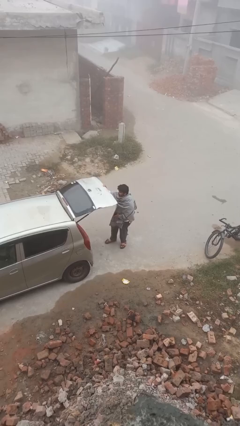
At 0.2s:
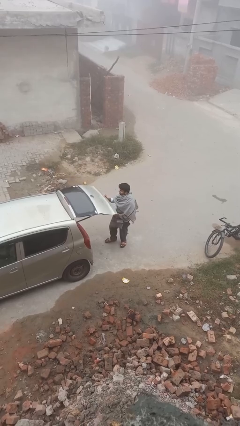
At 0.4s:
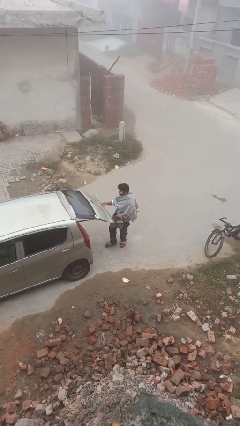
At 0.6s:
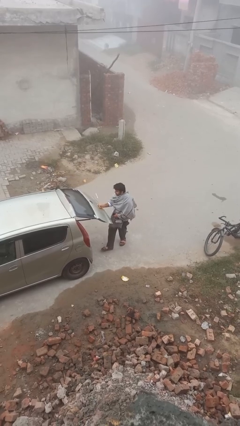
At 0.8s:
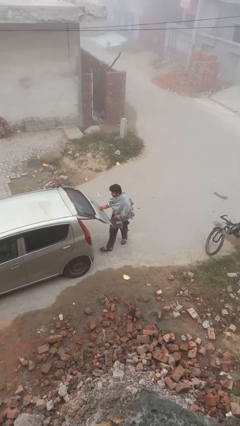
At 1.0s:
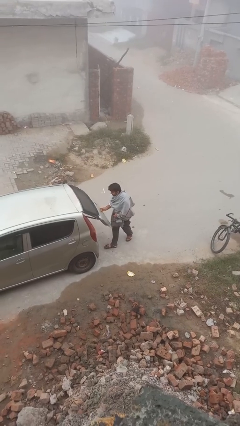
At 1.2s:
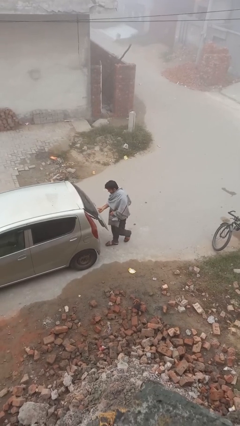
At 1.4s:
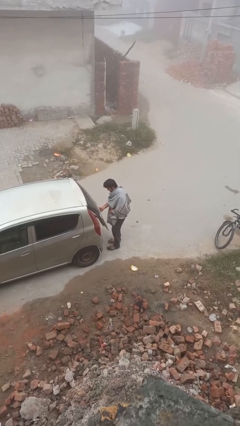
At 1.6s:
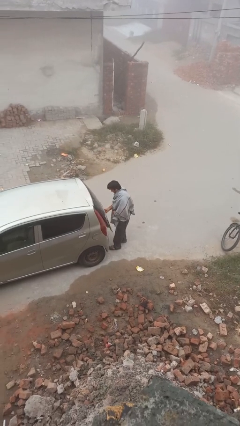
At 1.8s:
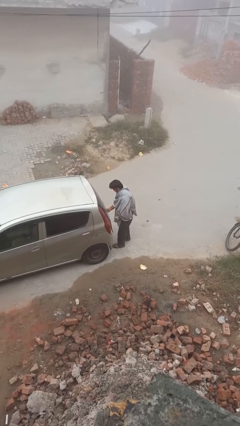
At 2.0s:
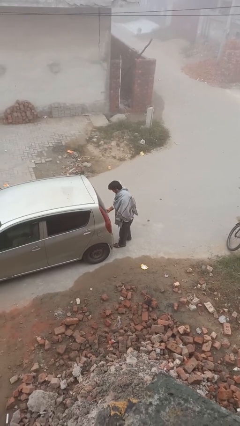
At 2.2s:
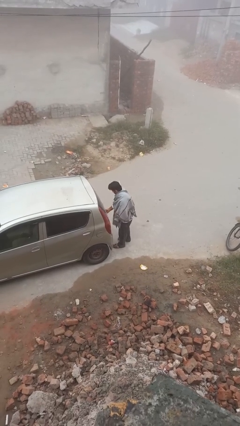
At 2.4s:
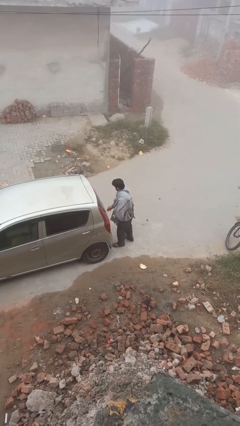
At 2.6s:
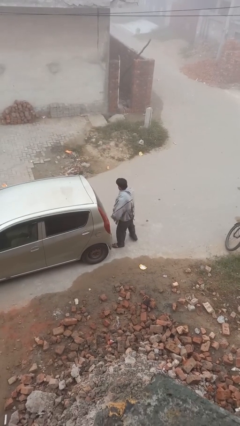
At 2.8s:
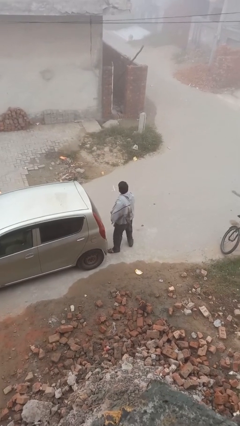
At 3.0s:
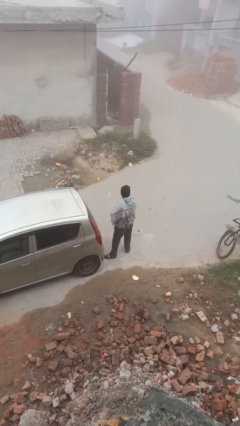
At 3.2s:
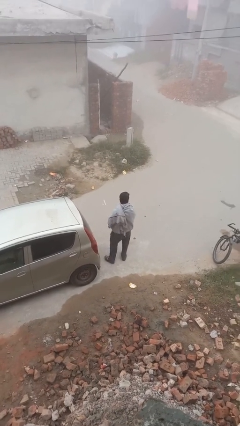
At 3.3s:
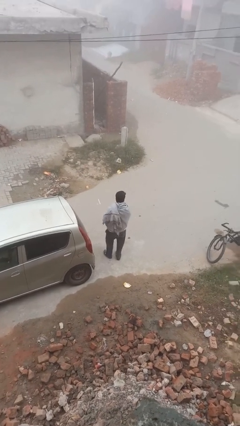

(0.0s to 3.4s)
person closes car trunk

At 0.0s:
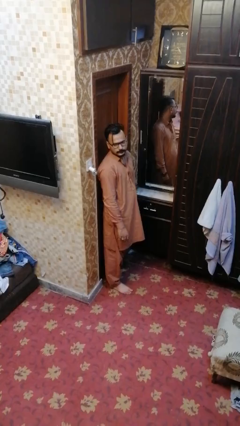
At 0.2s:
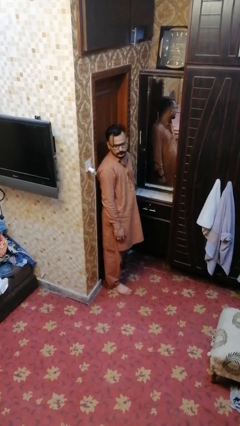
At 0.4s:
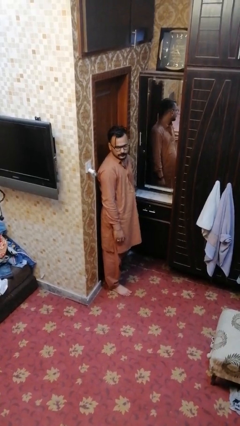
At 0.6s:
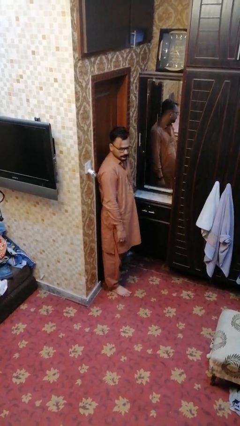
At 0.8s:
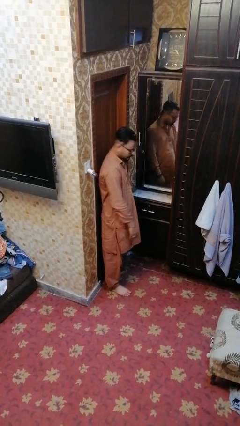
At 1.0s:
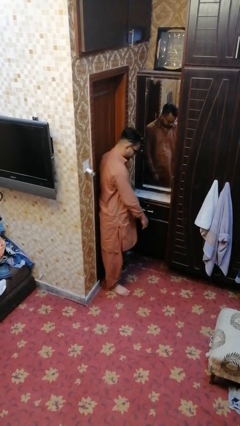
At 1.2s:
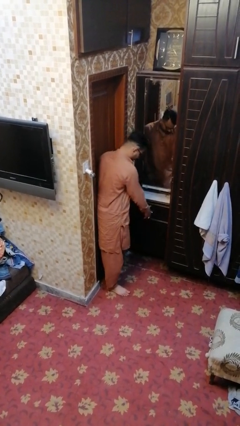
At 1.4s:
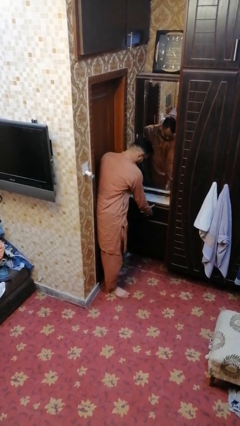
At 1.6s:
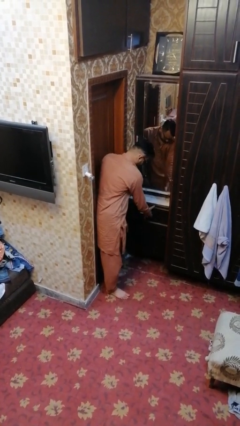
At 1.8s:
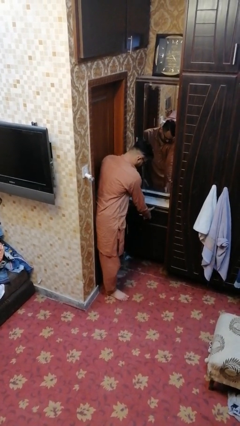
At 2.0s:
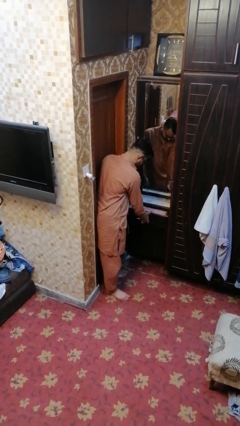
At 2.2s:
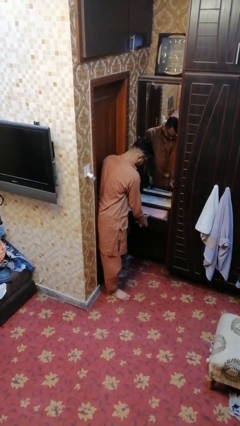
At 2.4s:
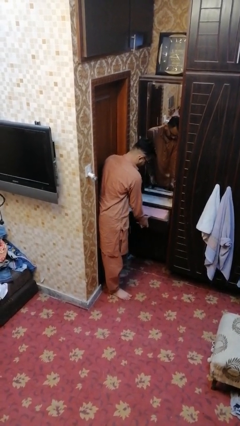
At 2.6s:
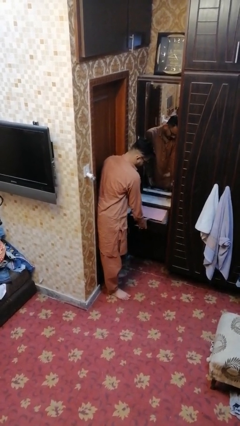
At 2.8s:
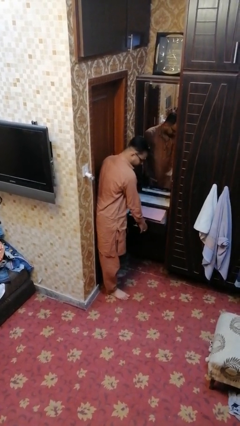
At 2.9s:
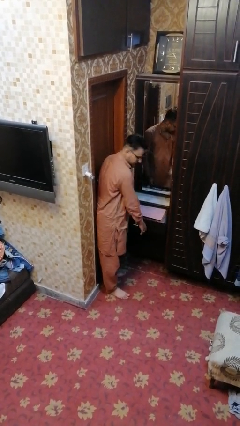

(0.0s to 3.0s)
person opens dresser drawer

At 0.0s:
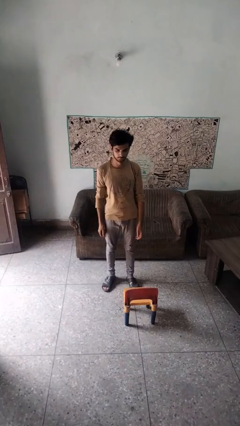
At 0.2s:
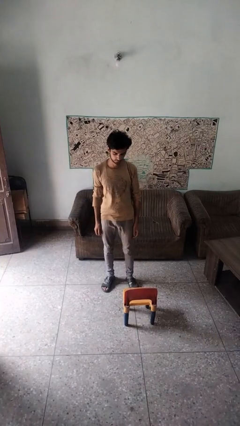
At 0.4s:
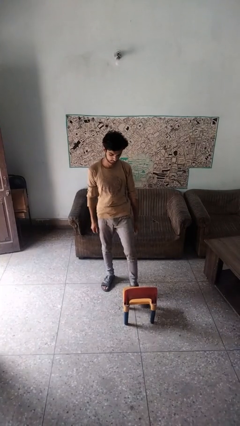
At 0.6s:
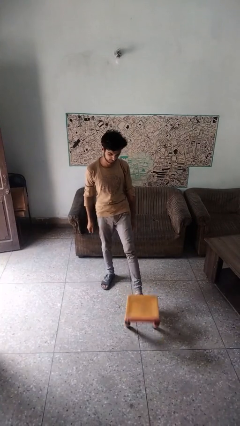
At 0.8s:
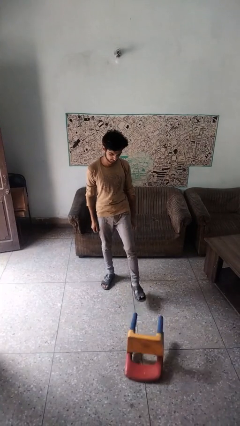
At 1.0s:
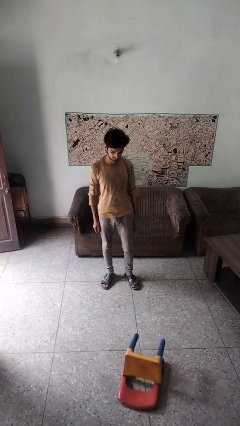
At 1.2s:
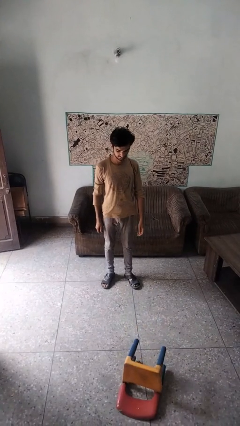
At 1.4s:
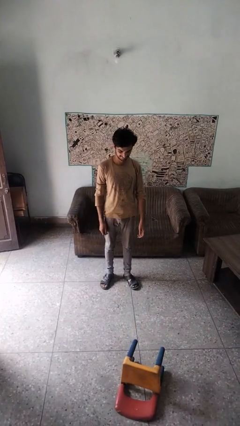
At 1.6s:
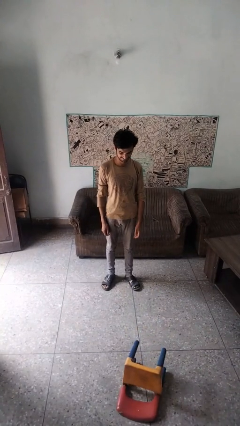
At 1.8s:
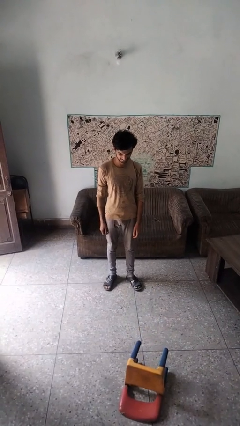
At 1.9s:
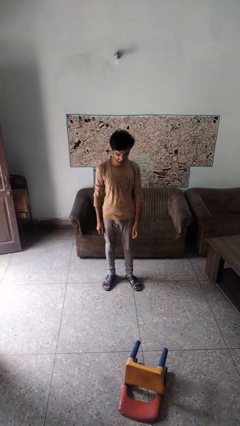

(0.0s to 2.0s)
person knocks over furniture

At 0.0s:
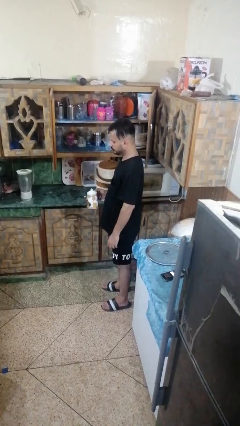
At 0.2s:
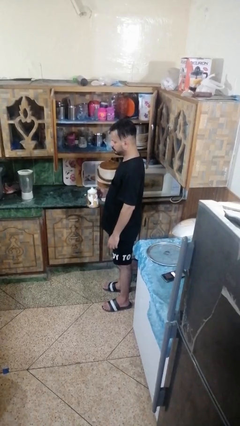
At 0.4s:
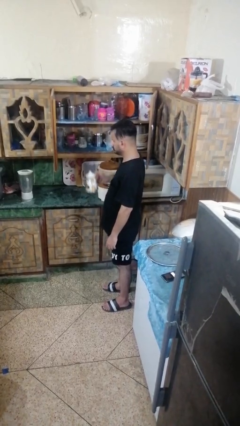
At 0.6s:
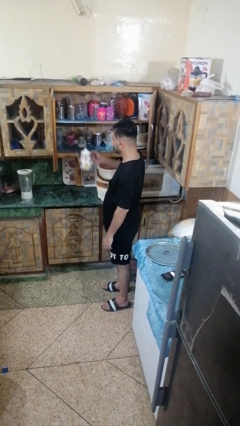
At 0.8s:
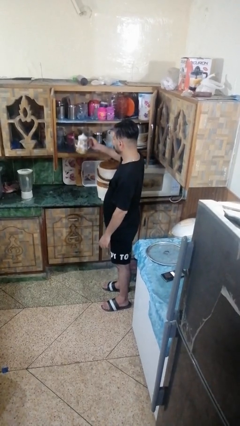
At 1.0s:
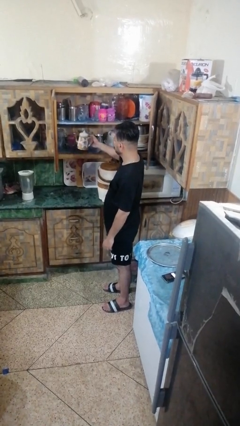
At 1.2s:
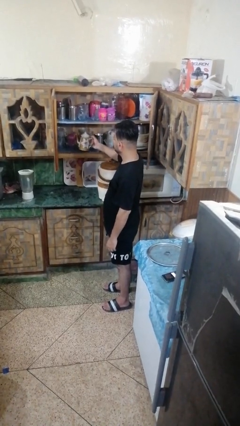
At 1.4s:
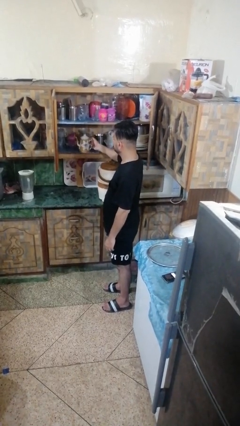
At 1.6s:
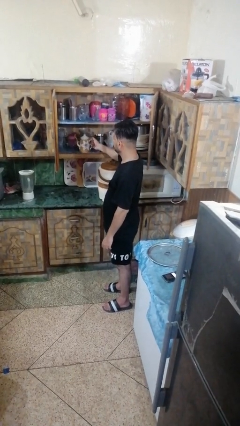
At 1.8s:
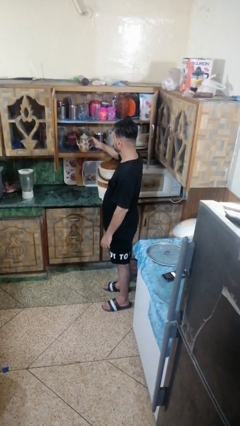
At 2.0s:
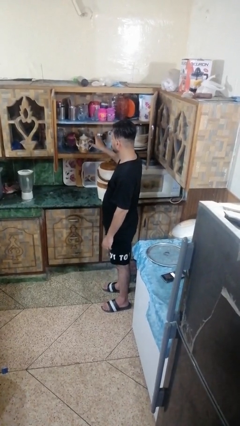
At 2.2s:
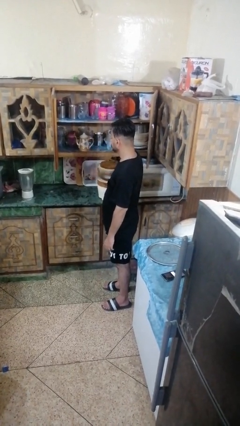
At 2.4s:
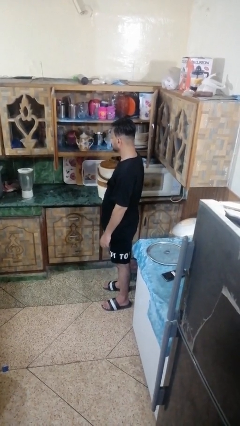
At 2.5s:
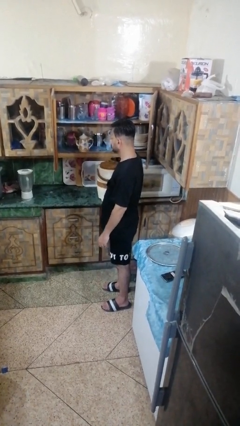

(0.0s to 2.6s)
person puts down object into cabinet

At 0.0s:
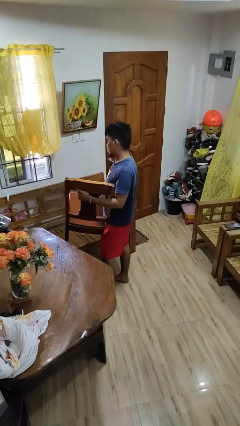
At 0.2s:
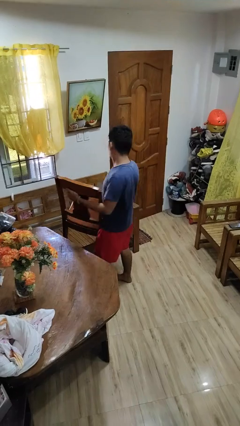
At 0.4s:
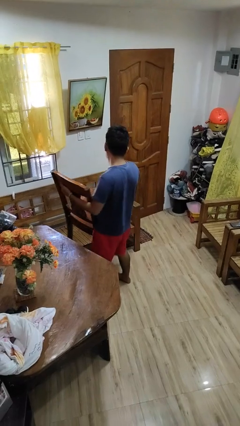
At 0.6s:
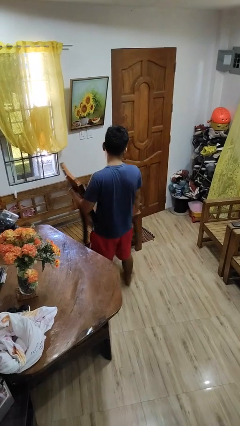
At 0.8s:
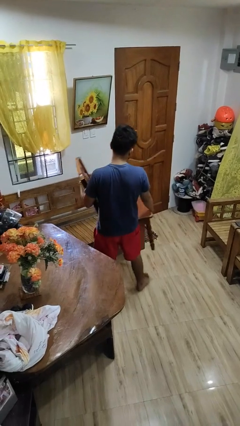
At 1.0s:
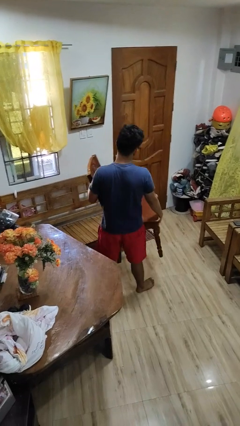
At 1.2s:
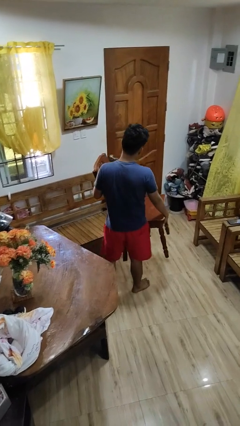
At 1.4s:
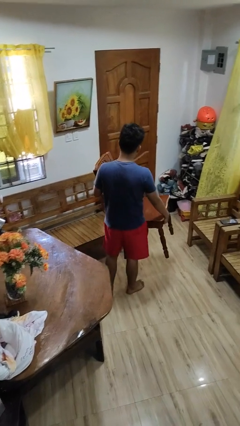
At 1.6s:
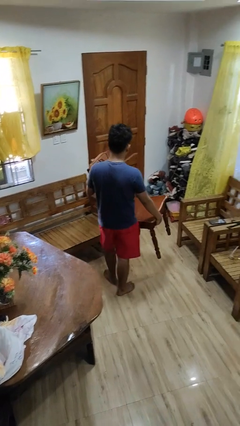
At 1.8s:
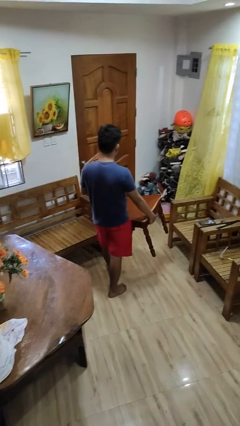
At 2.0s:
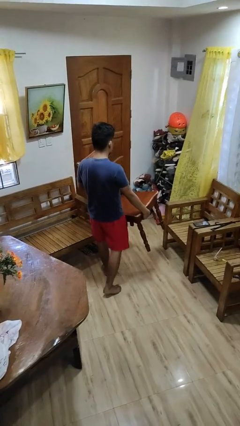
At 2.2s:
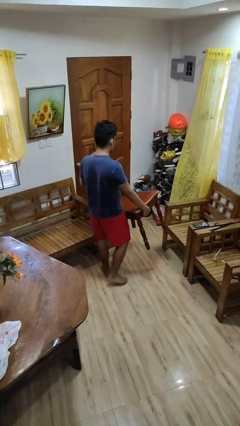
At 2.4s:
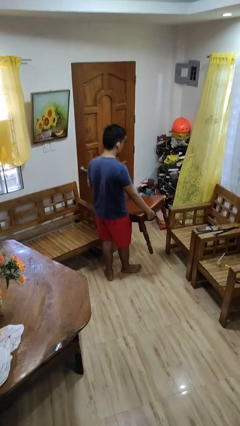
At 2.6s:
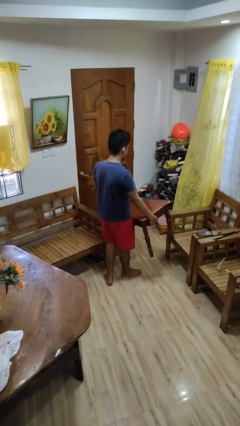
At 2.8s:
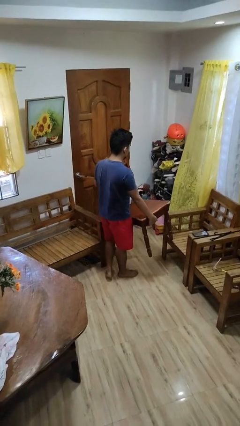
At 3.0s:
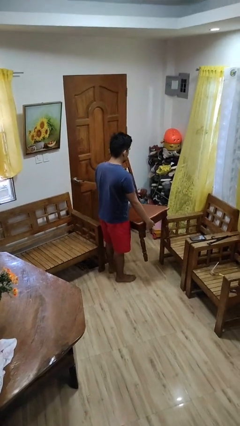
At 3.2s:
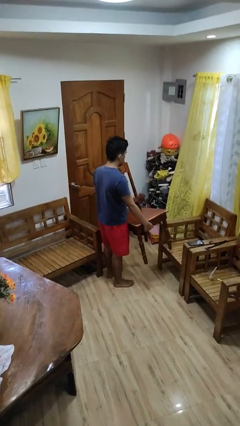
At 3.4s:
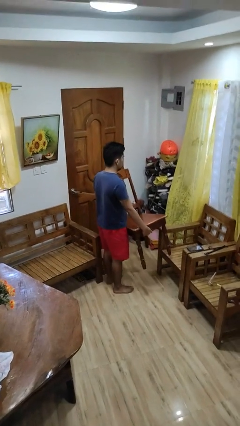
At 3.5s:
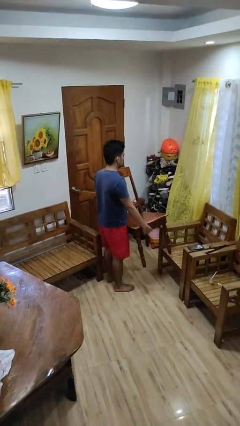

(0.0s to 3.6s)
person carries furniture

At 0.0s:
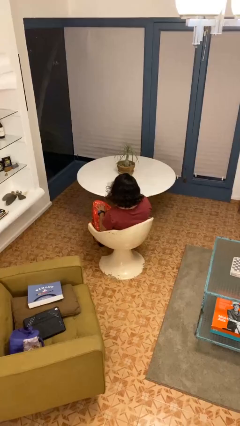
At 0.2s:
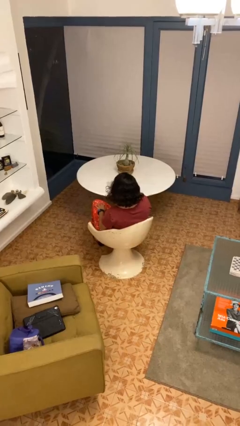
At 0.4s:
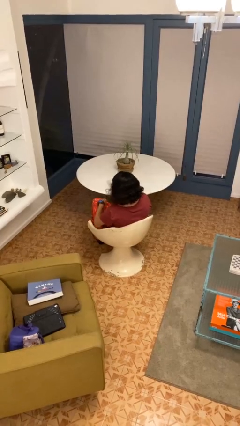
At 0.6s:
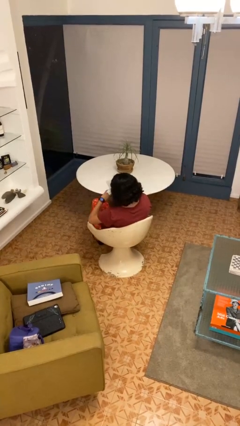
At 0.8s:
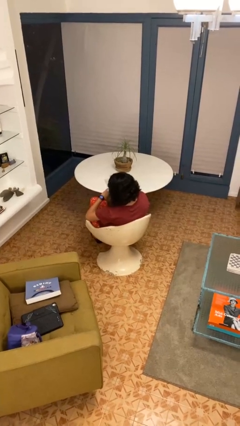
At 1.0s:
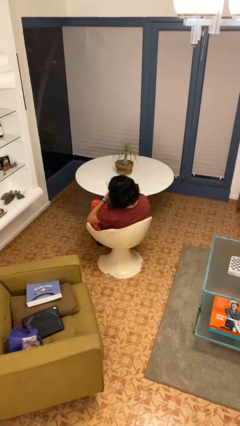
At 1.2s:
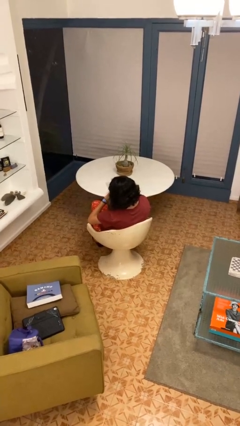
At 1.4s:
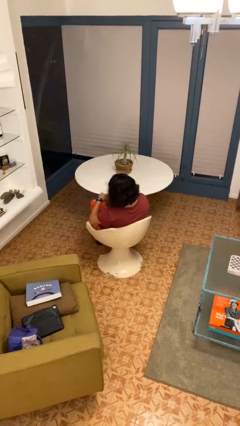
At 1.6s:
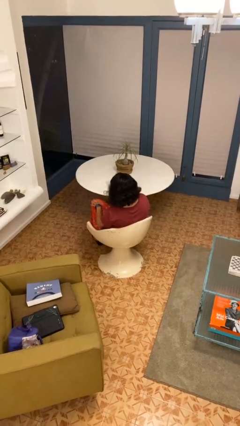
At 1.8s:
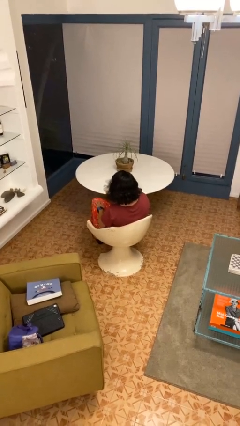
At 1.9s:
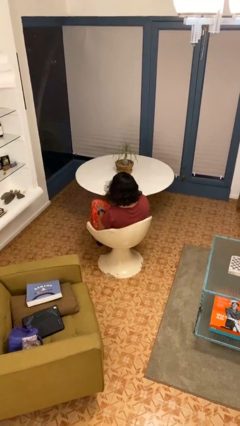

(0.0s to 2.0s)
person looks at wristwatch

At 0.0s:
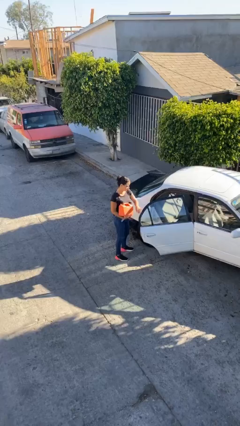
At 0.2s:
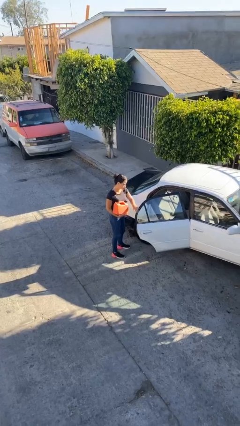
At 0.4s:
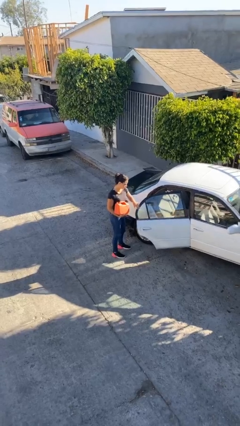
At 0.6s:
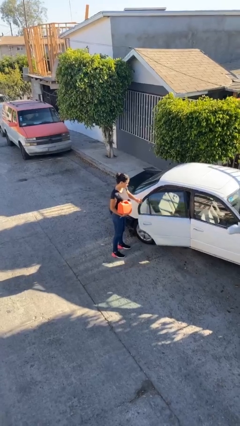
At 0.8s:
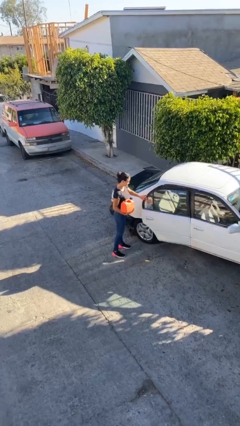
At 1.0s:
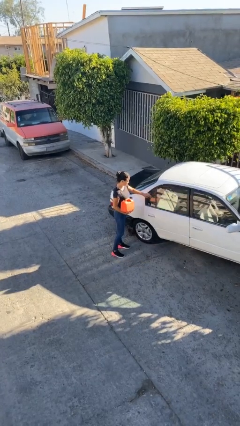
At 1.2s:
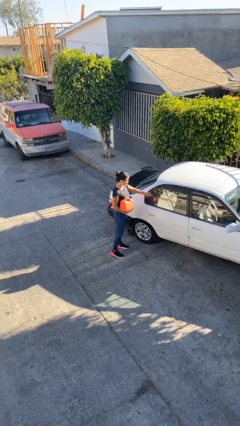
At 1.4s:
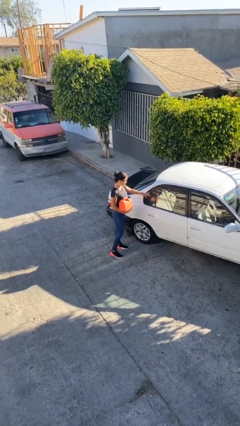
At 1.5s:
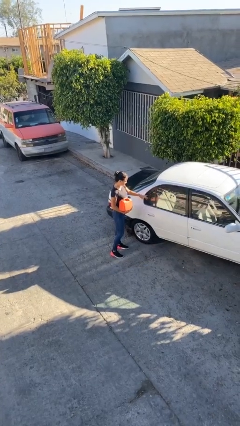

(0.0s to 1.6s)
person closes car door
